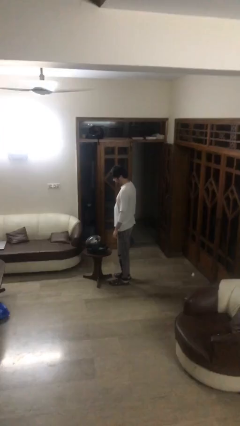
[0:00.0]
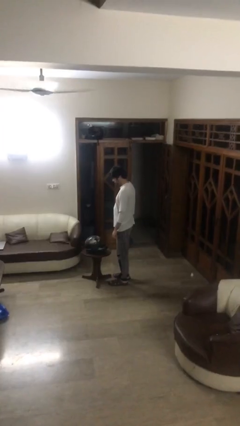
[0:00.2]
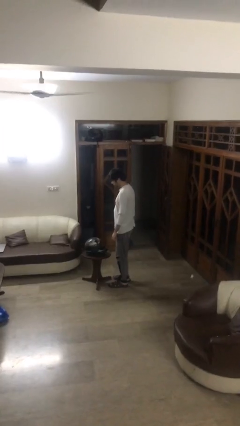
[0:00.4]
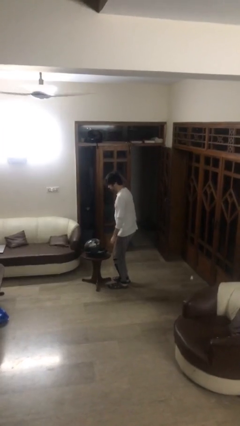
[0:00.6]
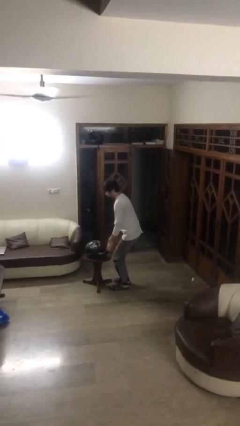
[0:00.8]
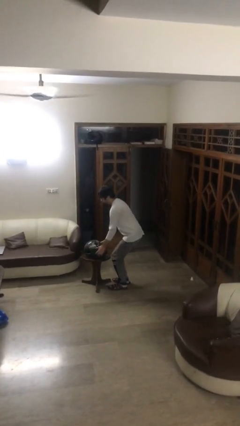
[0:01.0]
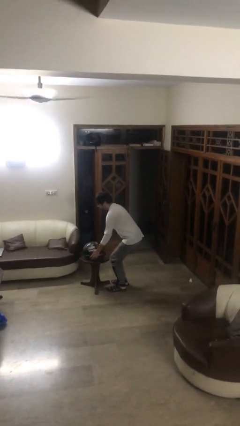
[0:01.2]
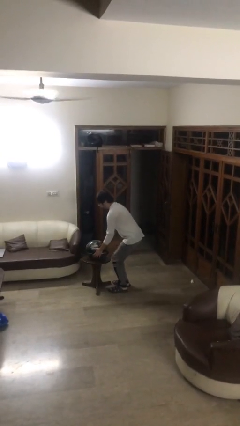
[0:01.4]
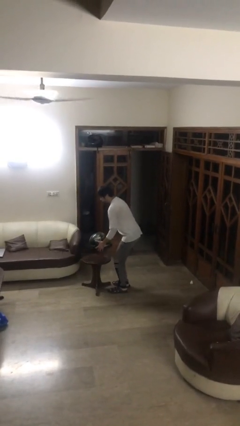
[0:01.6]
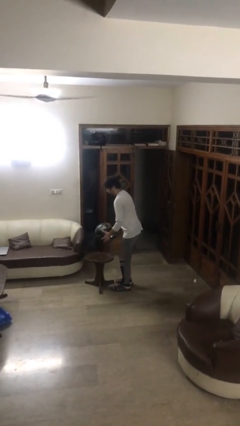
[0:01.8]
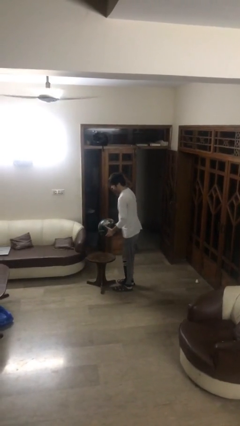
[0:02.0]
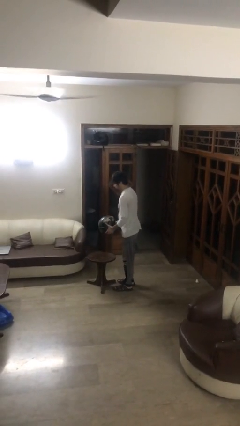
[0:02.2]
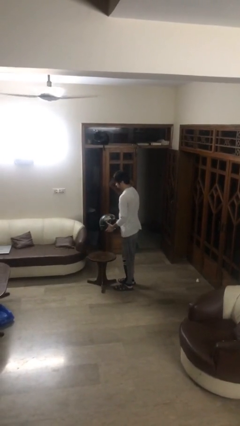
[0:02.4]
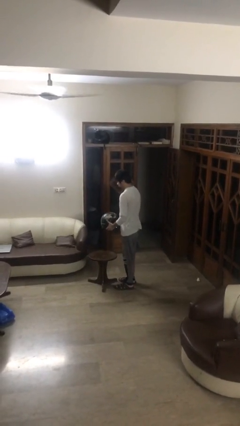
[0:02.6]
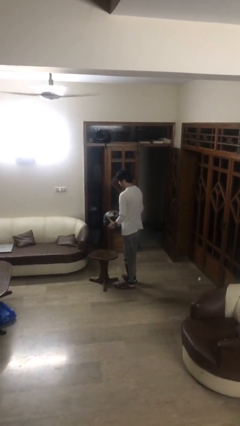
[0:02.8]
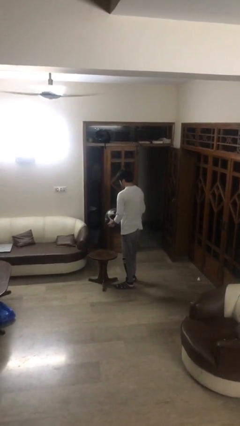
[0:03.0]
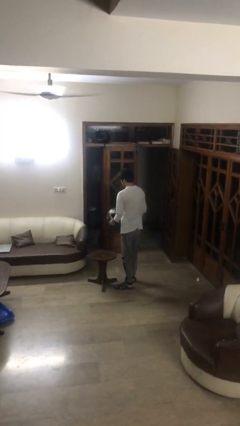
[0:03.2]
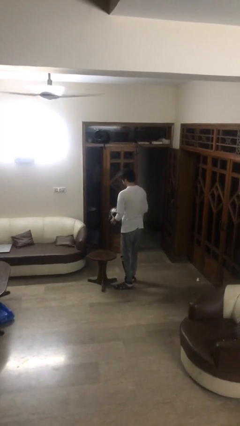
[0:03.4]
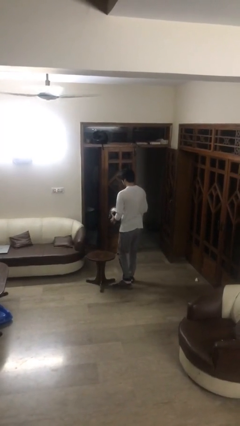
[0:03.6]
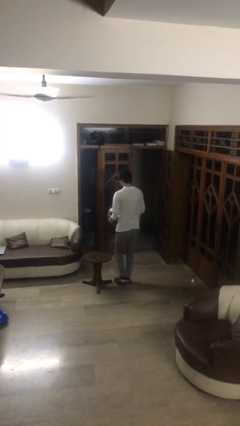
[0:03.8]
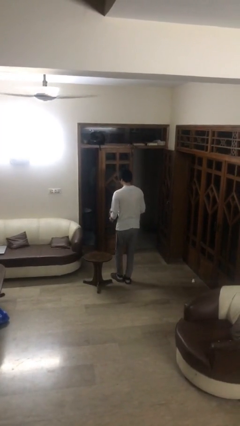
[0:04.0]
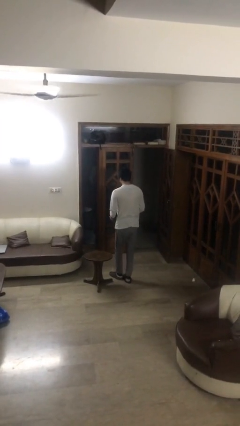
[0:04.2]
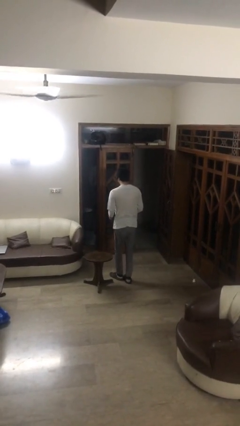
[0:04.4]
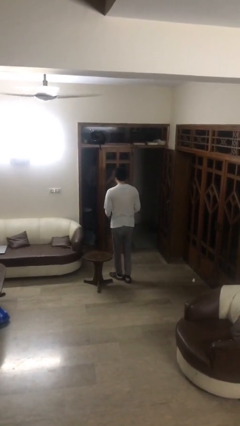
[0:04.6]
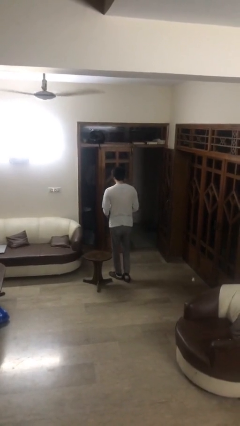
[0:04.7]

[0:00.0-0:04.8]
person picks up object from table

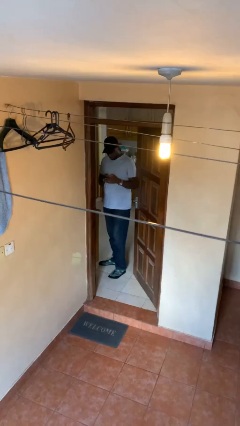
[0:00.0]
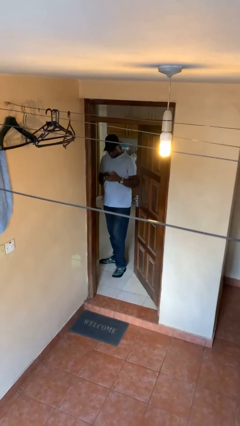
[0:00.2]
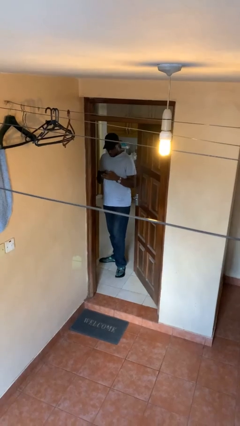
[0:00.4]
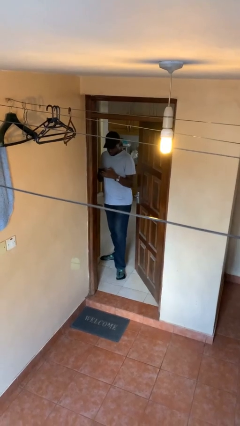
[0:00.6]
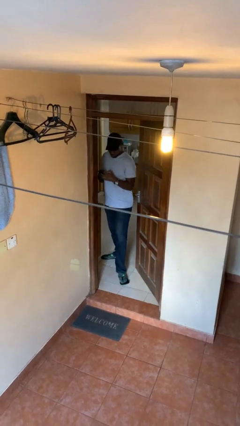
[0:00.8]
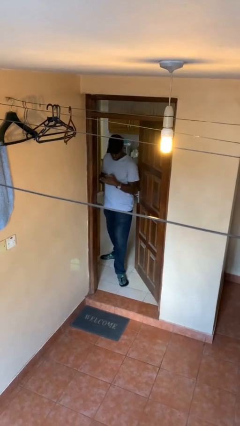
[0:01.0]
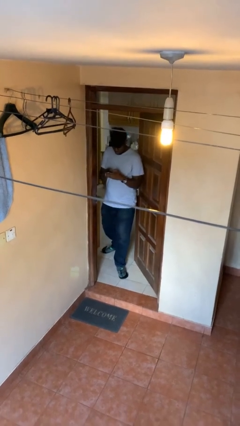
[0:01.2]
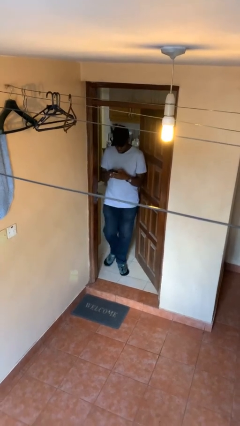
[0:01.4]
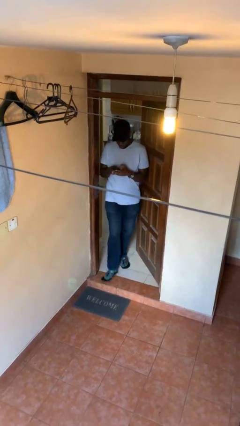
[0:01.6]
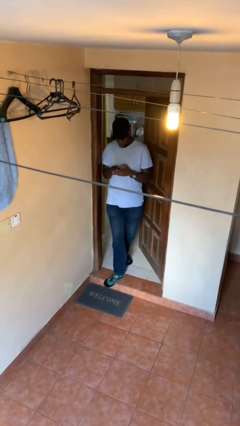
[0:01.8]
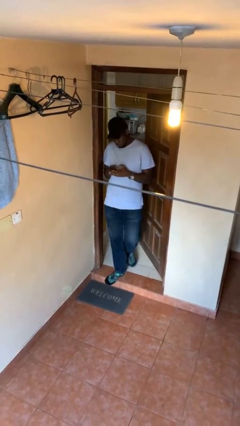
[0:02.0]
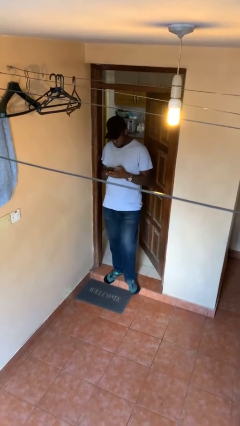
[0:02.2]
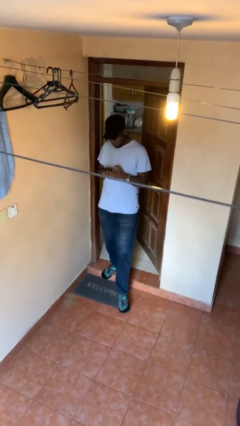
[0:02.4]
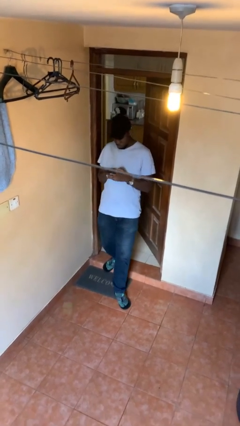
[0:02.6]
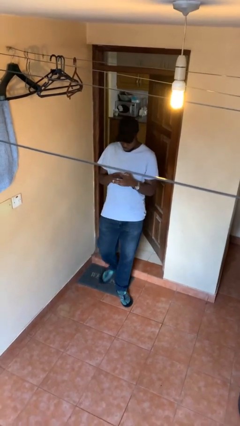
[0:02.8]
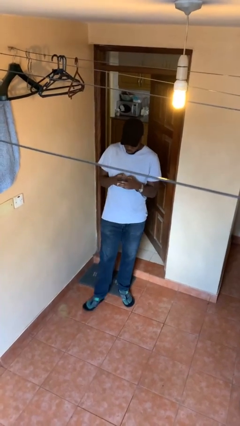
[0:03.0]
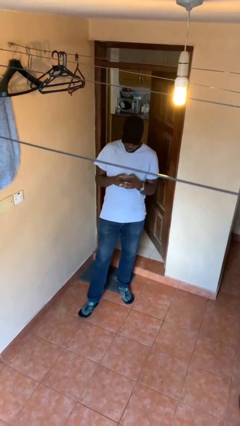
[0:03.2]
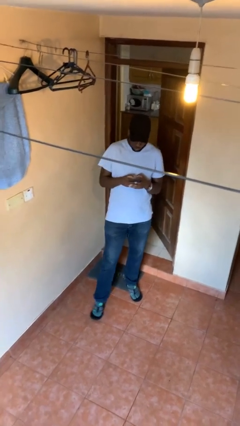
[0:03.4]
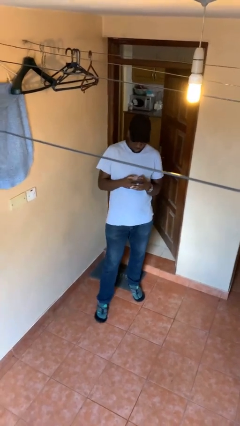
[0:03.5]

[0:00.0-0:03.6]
person enters scene through structure

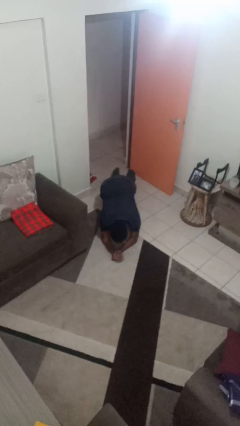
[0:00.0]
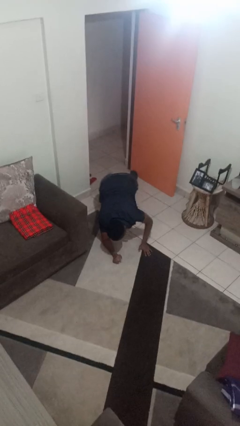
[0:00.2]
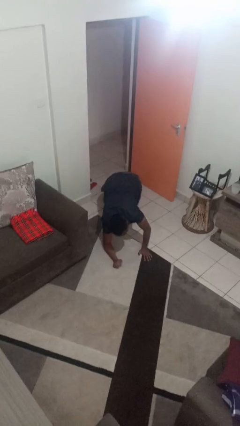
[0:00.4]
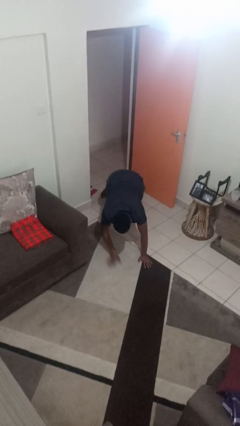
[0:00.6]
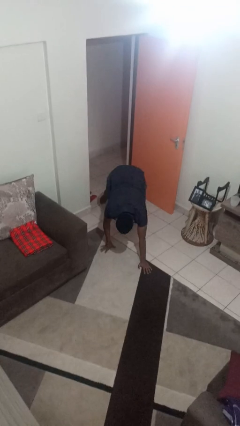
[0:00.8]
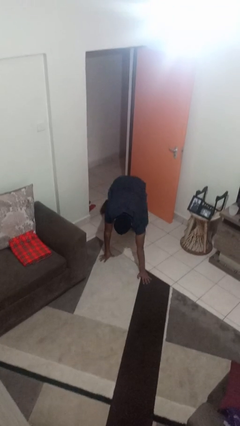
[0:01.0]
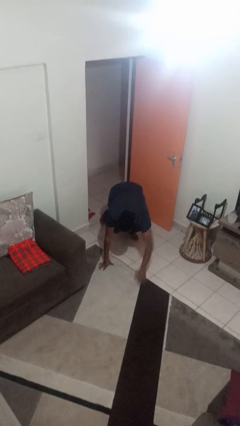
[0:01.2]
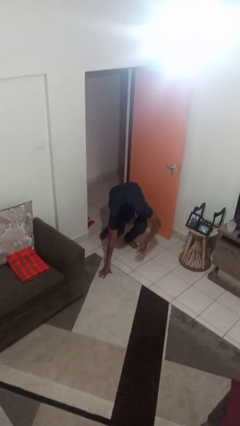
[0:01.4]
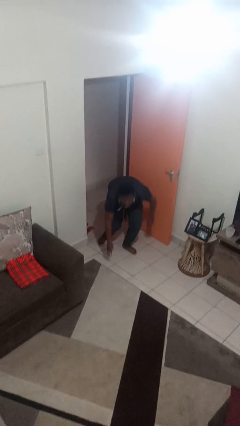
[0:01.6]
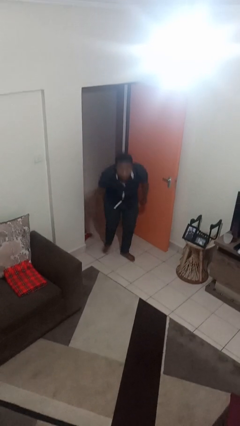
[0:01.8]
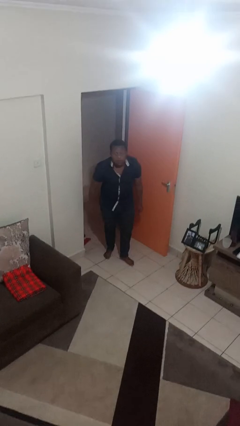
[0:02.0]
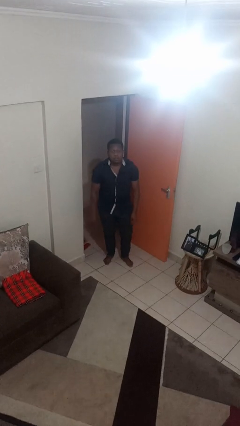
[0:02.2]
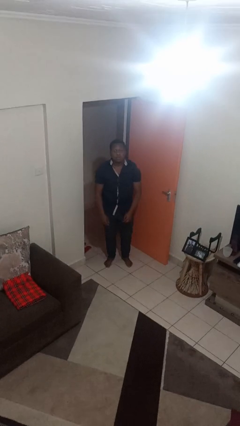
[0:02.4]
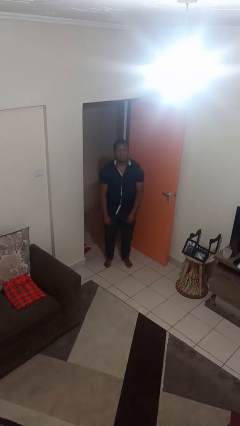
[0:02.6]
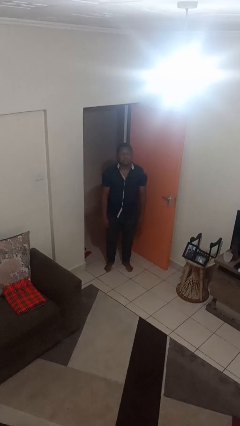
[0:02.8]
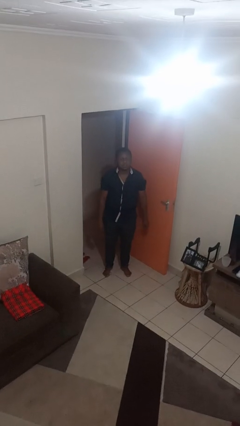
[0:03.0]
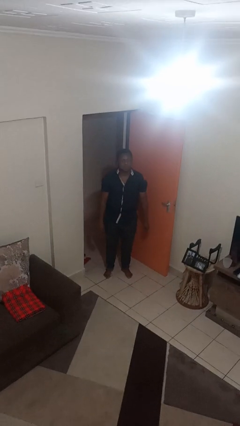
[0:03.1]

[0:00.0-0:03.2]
person stands up from floor

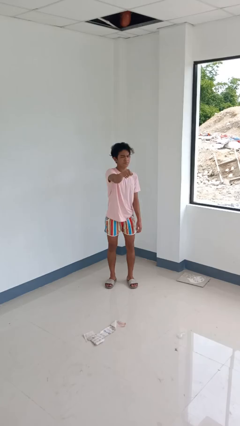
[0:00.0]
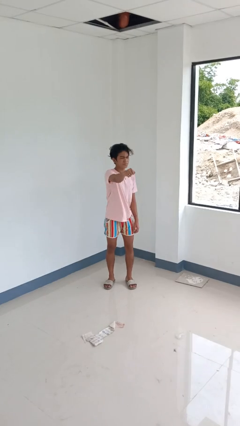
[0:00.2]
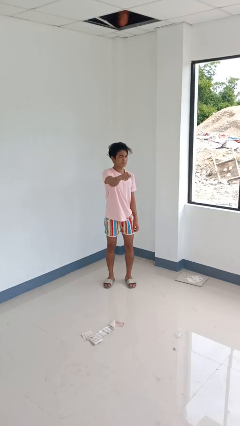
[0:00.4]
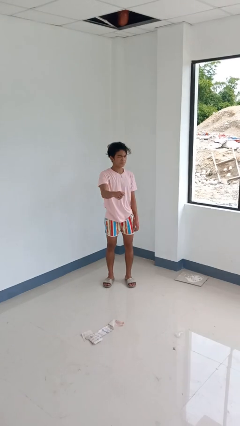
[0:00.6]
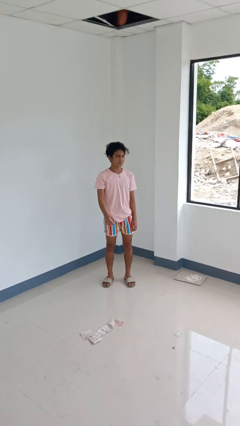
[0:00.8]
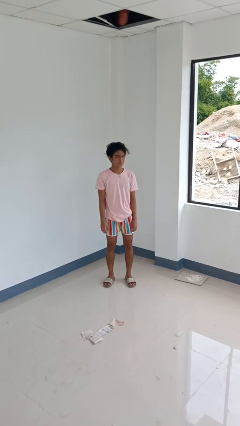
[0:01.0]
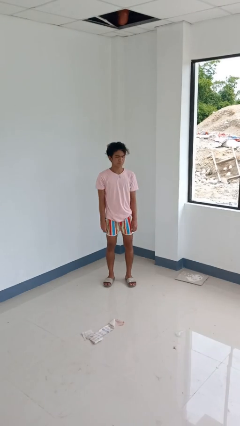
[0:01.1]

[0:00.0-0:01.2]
person punches

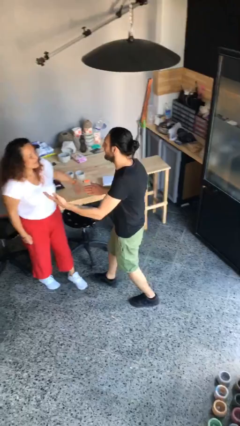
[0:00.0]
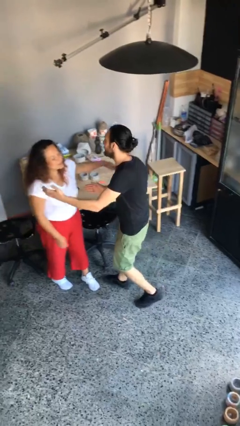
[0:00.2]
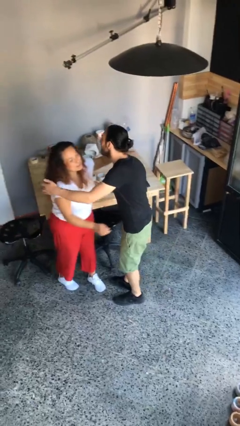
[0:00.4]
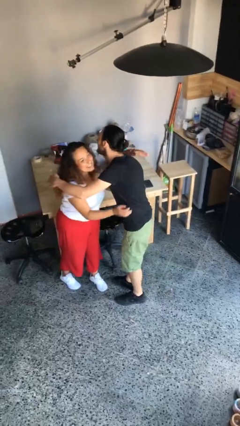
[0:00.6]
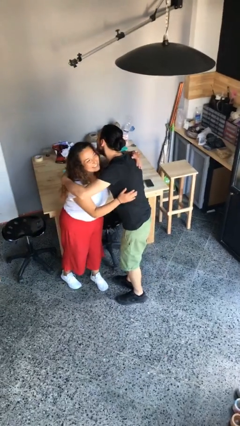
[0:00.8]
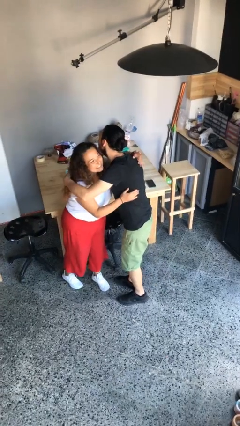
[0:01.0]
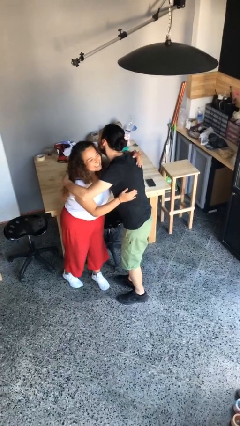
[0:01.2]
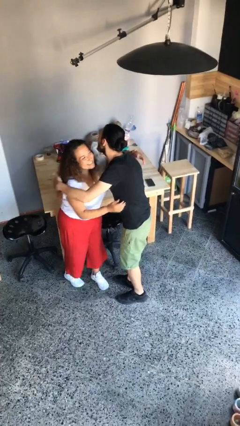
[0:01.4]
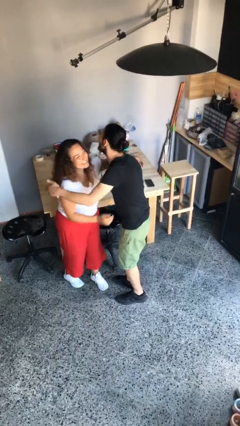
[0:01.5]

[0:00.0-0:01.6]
person embraces person

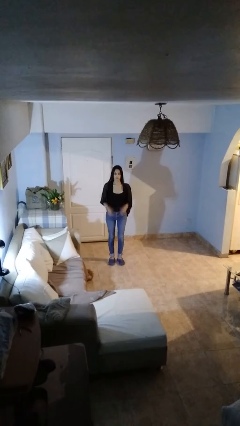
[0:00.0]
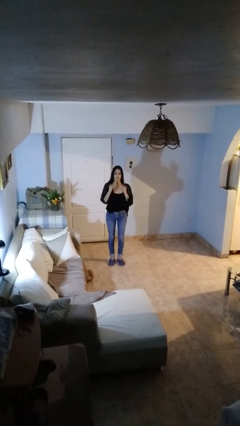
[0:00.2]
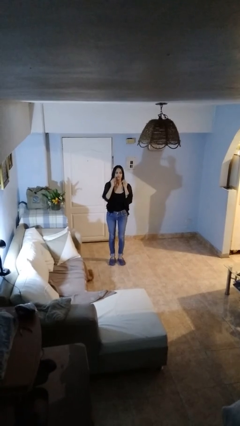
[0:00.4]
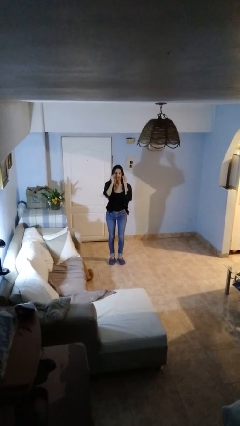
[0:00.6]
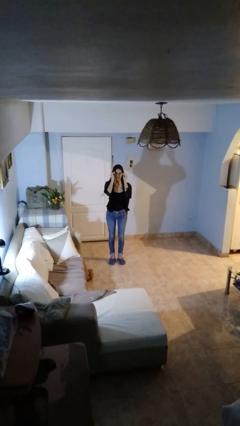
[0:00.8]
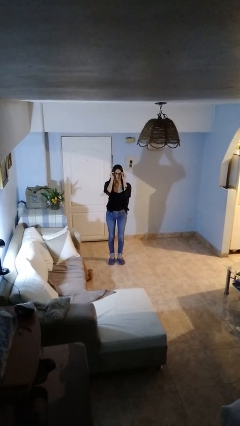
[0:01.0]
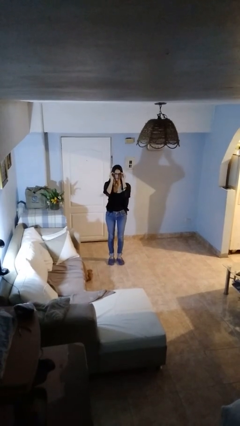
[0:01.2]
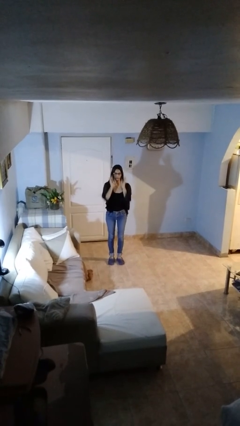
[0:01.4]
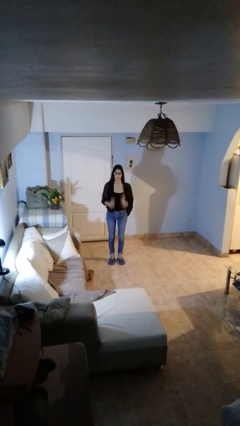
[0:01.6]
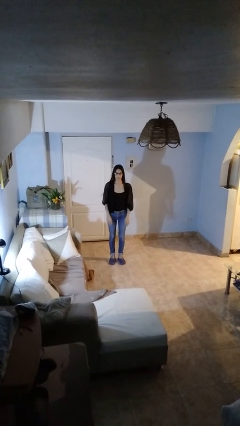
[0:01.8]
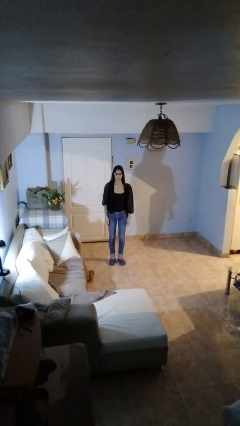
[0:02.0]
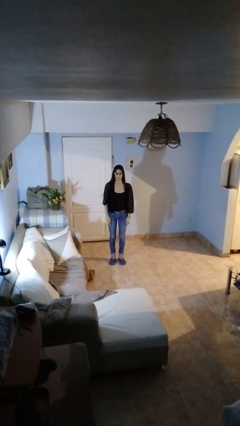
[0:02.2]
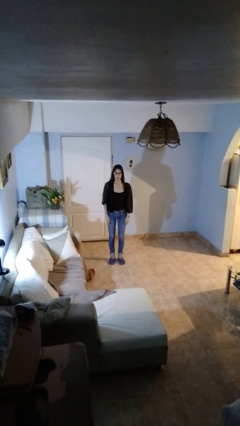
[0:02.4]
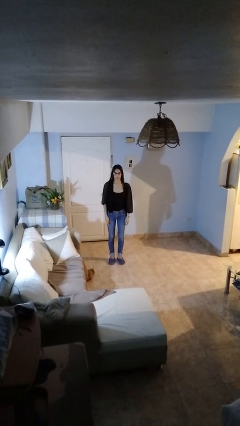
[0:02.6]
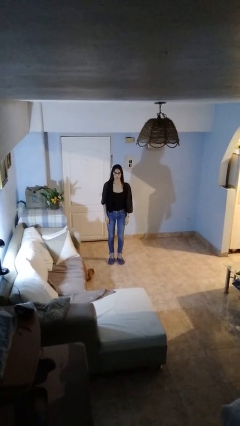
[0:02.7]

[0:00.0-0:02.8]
person puts on glasses

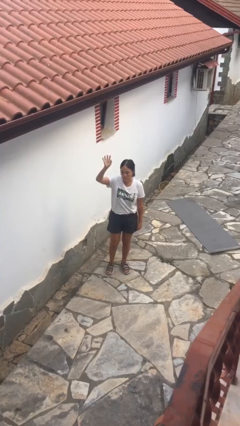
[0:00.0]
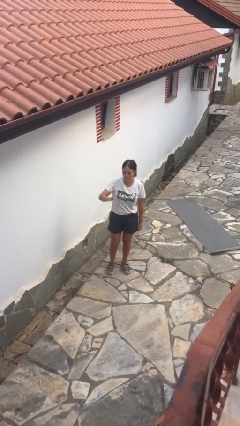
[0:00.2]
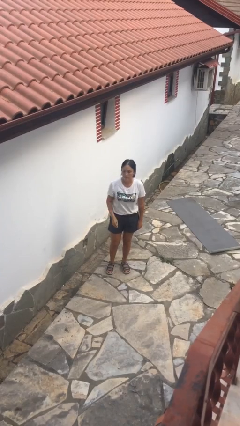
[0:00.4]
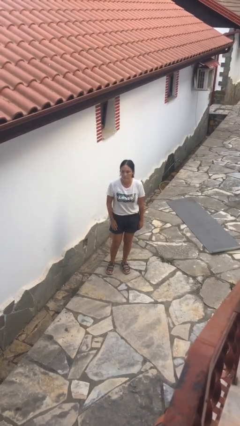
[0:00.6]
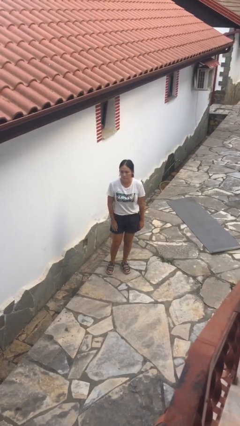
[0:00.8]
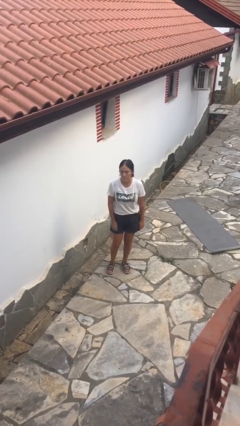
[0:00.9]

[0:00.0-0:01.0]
person gestures swipe down
